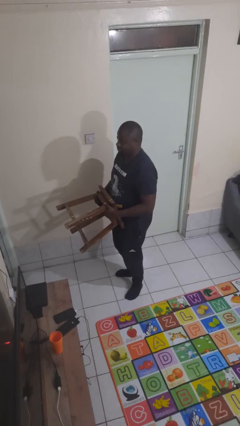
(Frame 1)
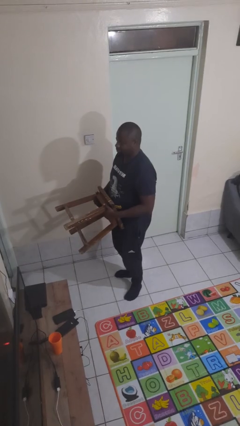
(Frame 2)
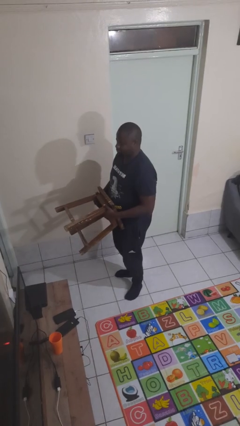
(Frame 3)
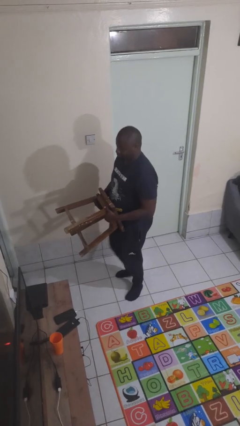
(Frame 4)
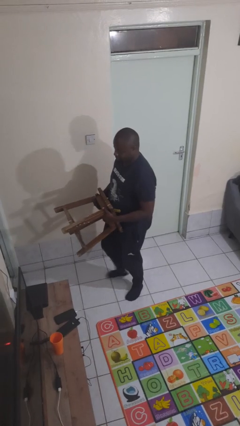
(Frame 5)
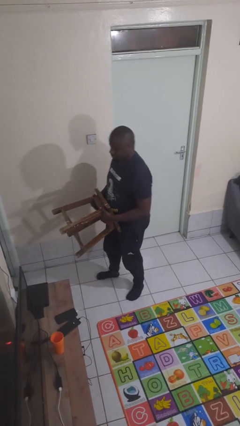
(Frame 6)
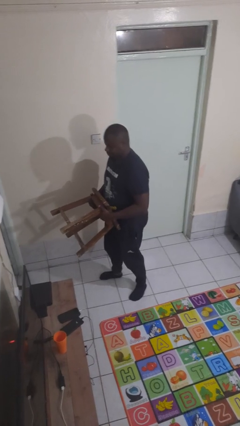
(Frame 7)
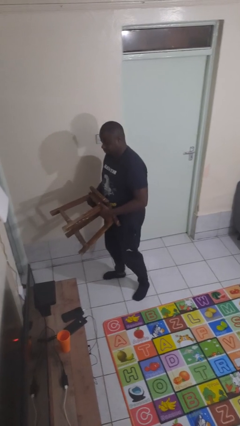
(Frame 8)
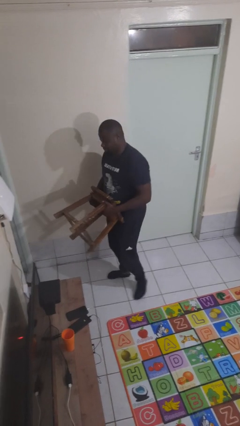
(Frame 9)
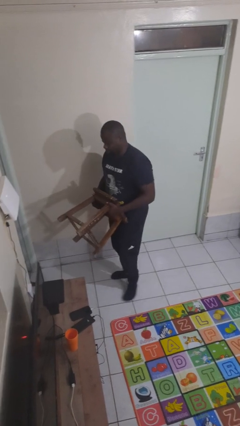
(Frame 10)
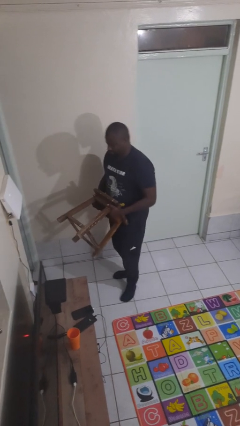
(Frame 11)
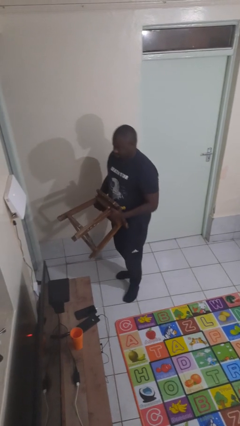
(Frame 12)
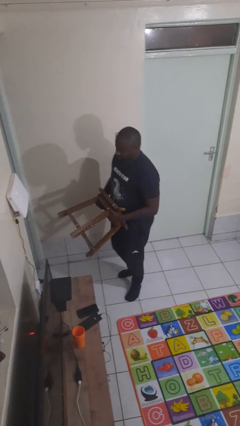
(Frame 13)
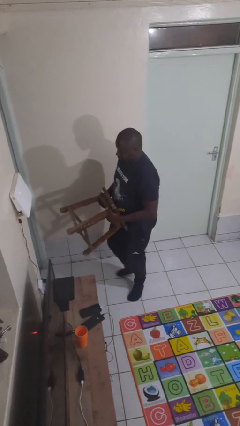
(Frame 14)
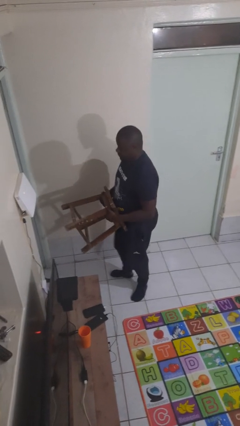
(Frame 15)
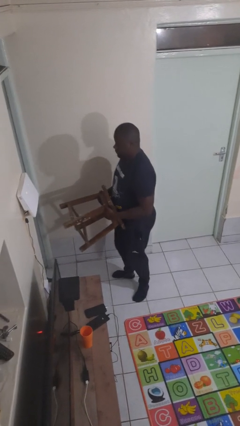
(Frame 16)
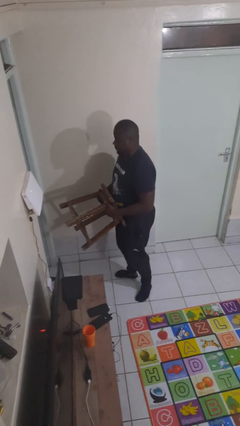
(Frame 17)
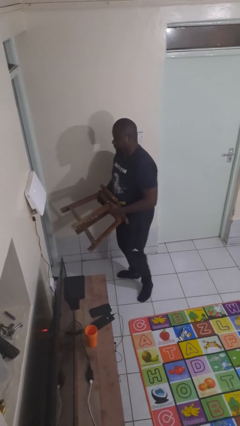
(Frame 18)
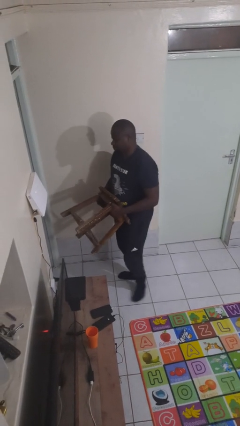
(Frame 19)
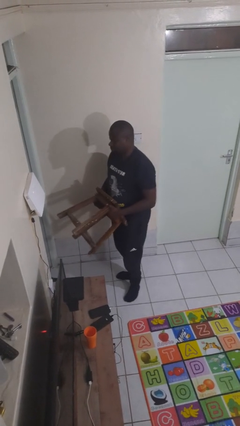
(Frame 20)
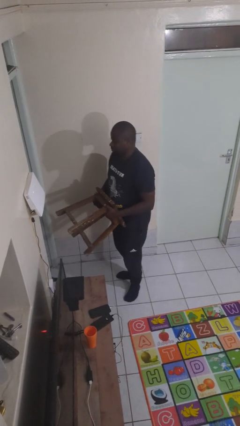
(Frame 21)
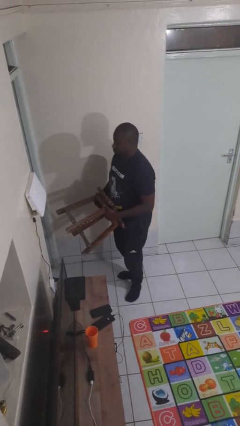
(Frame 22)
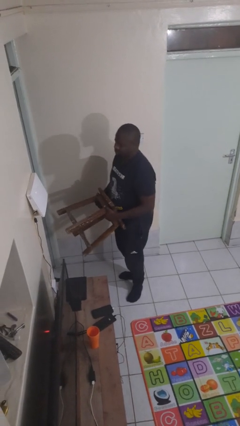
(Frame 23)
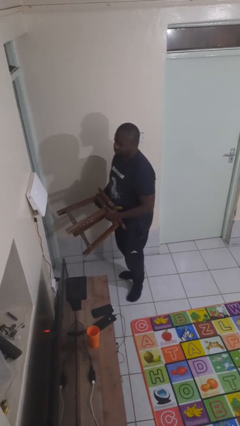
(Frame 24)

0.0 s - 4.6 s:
person carries furniture

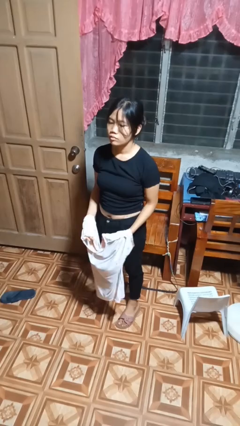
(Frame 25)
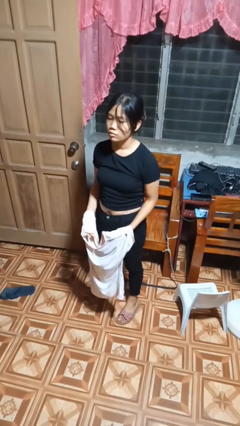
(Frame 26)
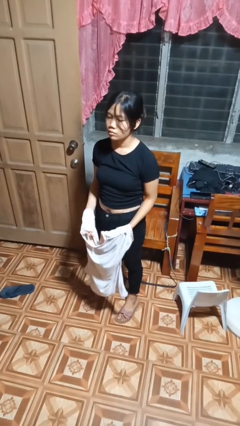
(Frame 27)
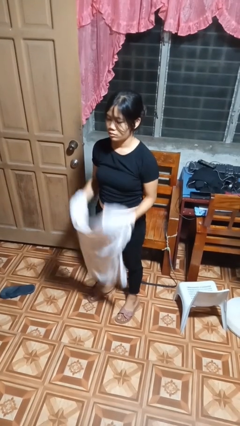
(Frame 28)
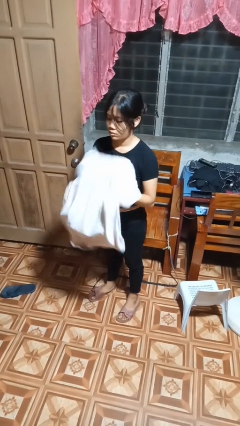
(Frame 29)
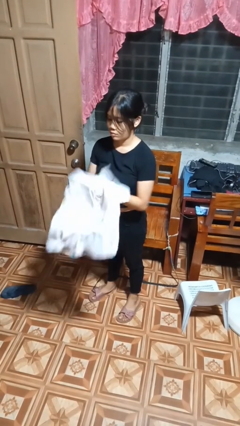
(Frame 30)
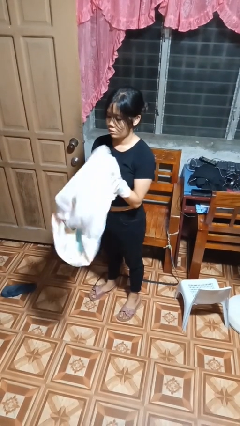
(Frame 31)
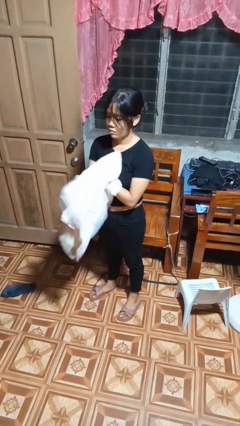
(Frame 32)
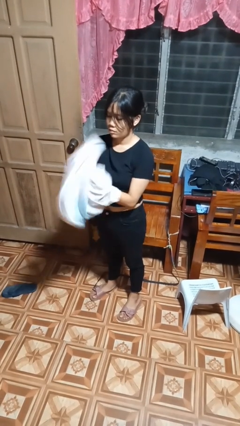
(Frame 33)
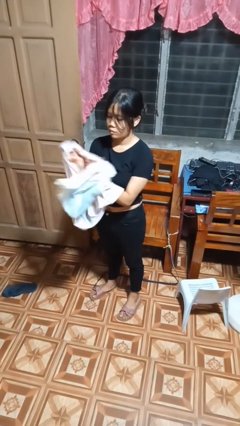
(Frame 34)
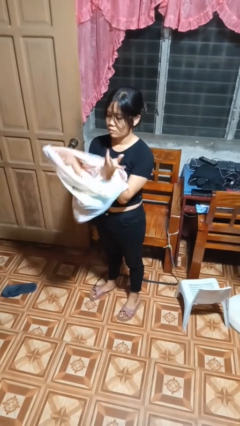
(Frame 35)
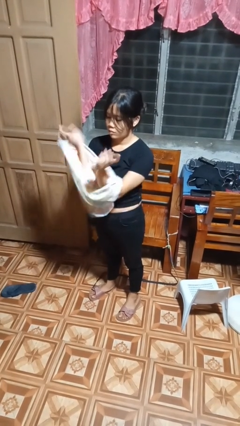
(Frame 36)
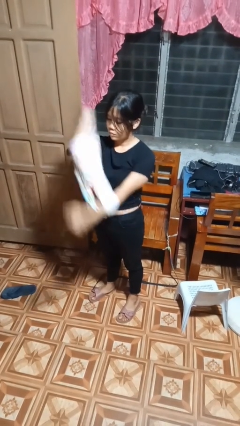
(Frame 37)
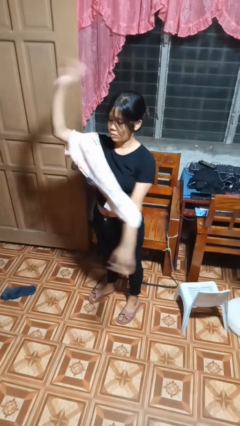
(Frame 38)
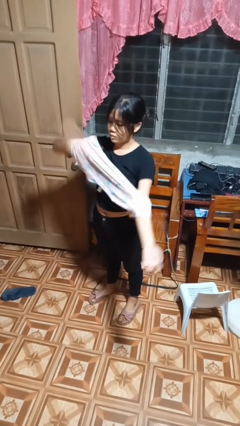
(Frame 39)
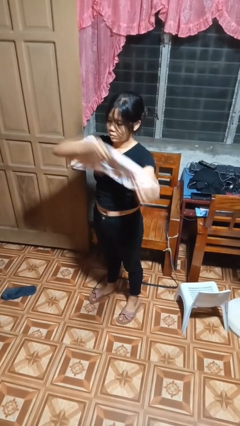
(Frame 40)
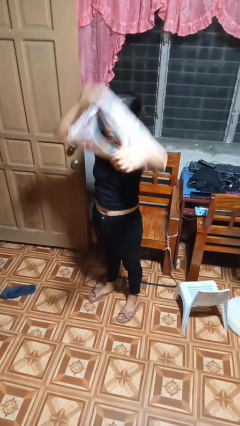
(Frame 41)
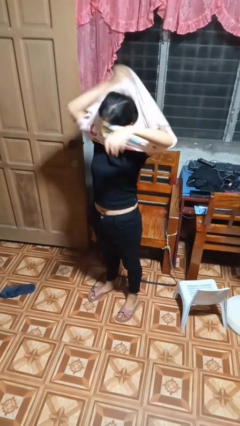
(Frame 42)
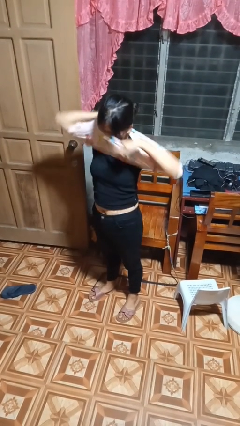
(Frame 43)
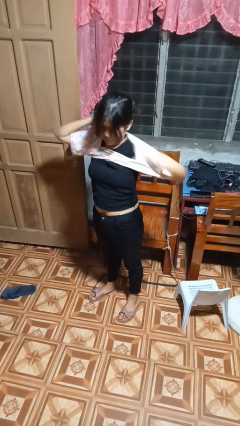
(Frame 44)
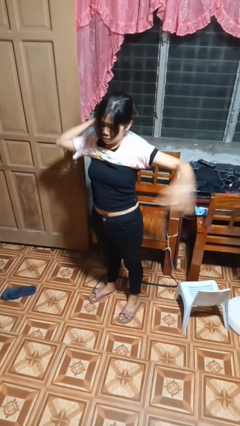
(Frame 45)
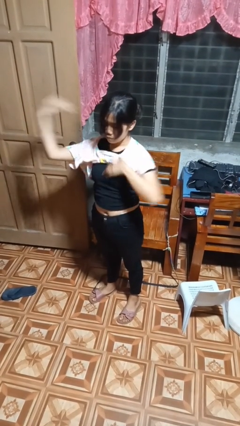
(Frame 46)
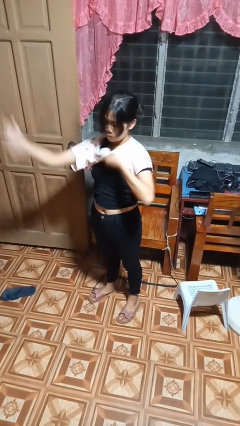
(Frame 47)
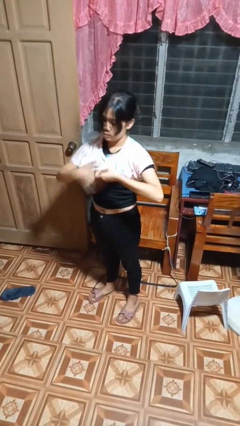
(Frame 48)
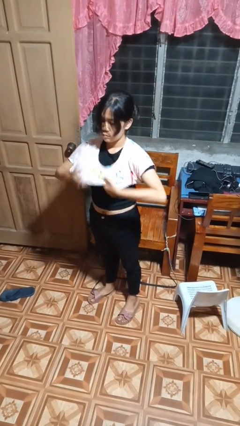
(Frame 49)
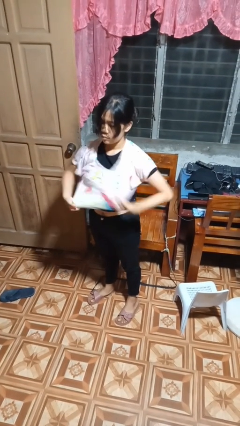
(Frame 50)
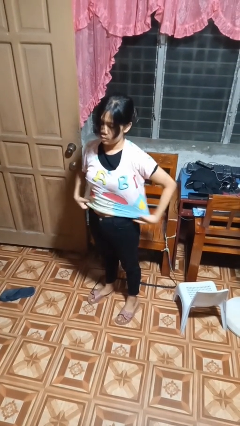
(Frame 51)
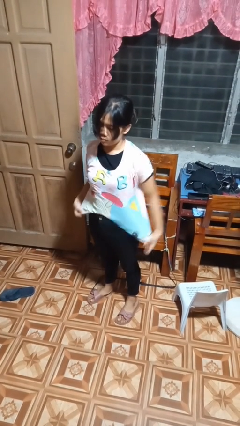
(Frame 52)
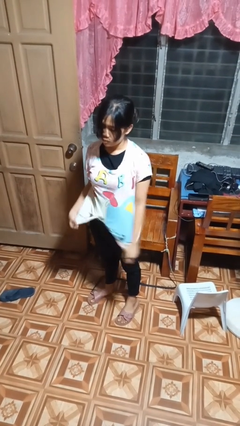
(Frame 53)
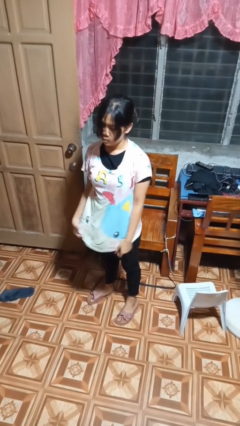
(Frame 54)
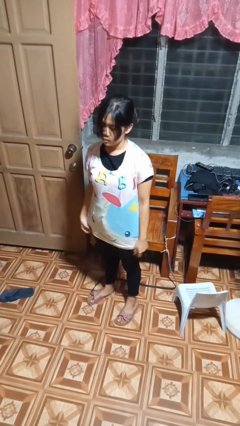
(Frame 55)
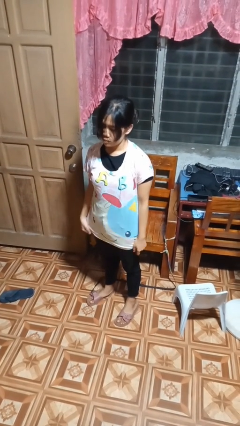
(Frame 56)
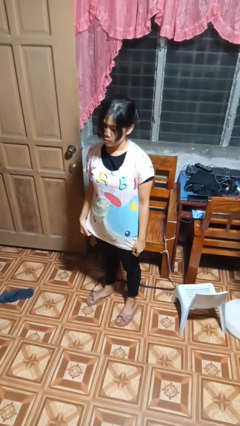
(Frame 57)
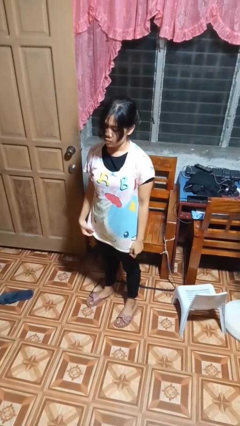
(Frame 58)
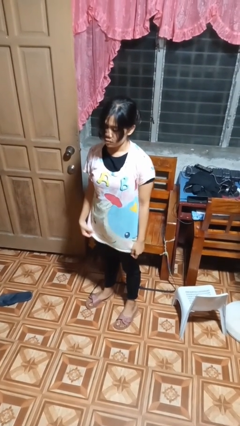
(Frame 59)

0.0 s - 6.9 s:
person puts on shirt

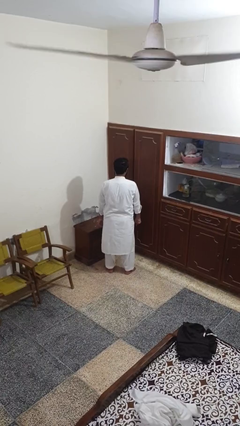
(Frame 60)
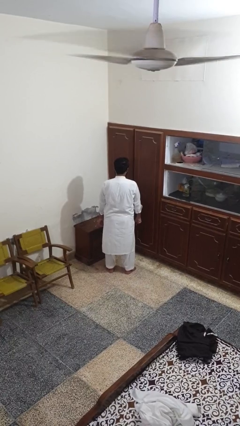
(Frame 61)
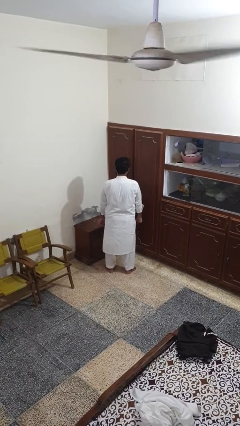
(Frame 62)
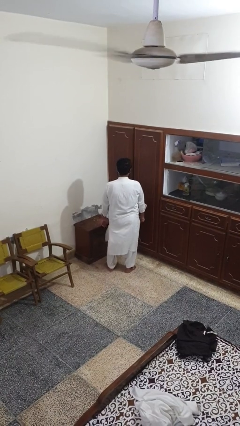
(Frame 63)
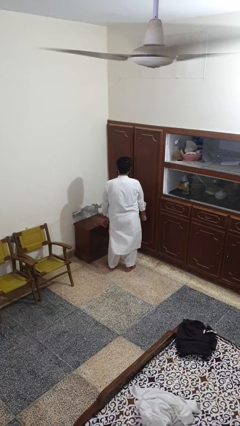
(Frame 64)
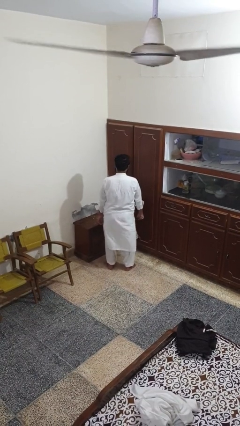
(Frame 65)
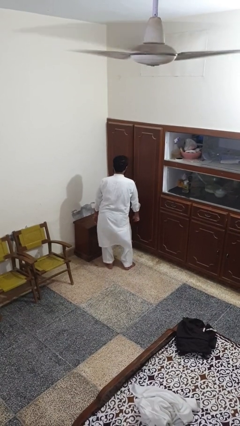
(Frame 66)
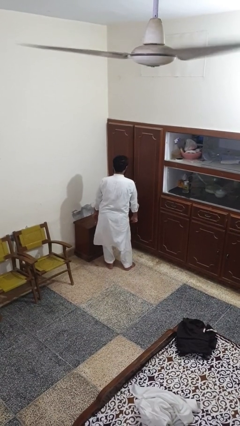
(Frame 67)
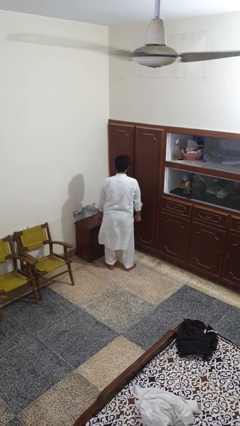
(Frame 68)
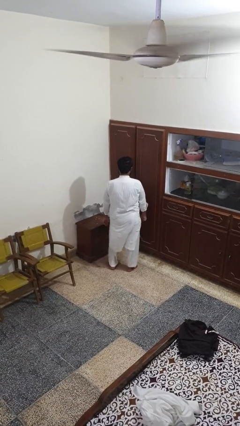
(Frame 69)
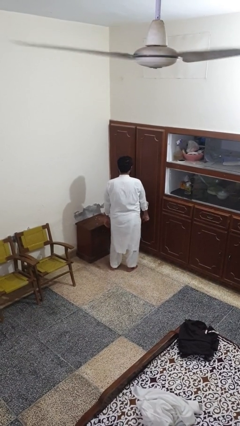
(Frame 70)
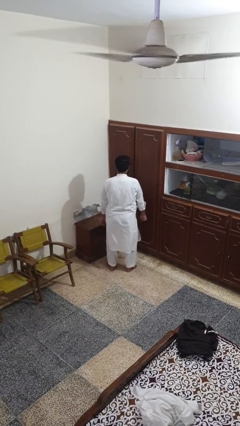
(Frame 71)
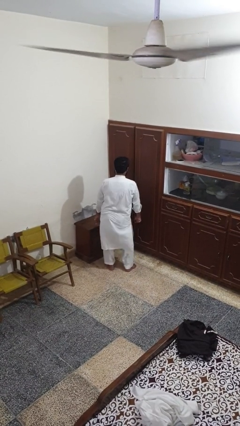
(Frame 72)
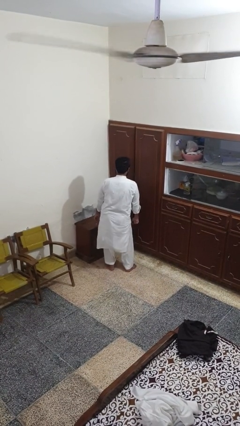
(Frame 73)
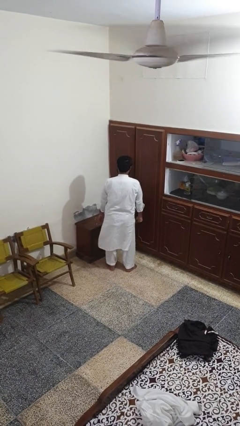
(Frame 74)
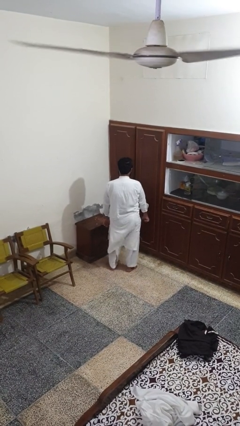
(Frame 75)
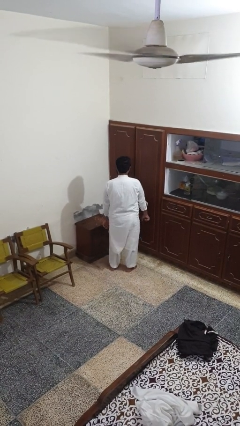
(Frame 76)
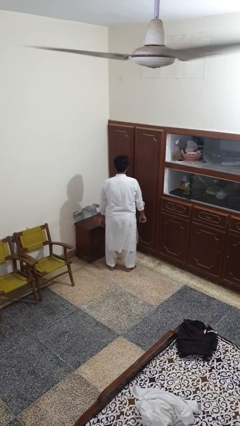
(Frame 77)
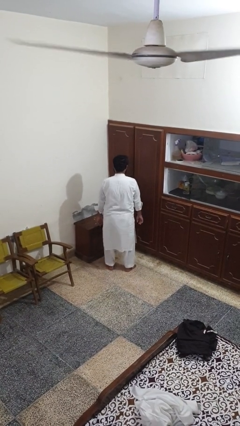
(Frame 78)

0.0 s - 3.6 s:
person wiggles hips

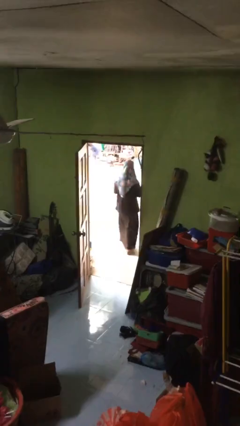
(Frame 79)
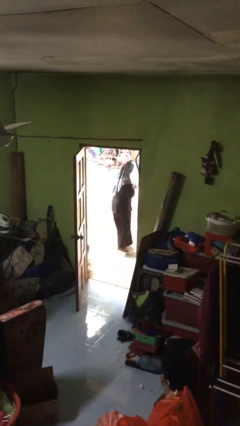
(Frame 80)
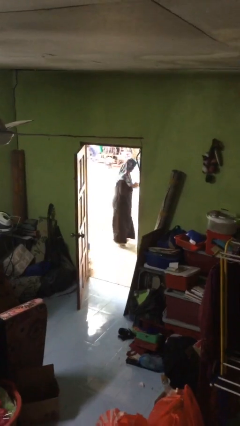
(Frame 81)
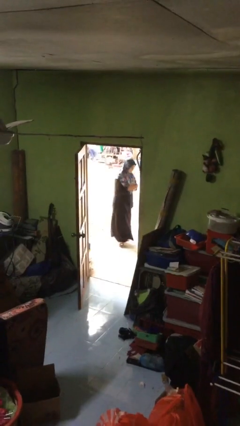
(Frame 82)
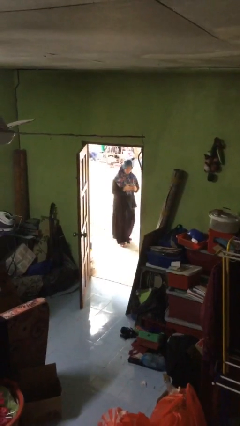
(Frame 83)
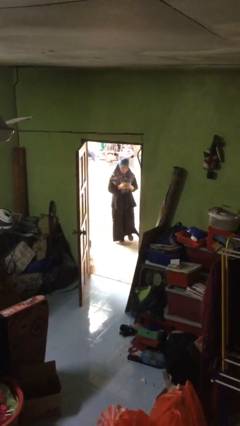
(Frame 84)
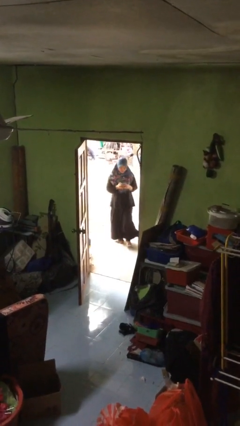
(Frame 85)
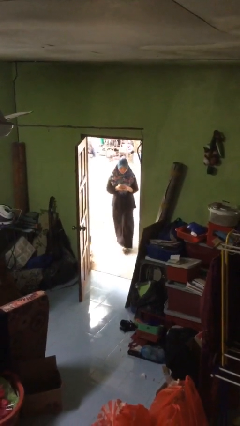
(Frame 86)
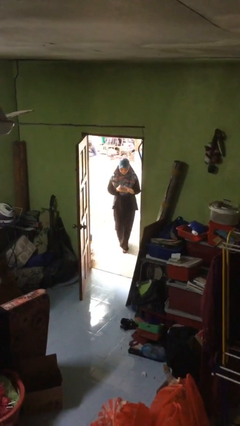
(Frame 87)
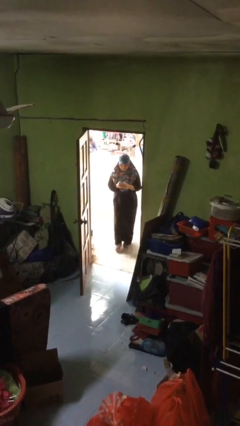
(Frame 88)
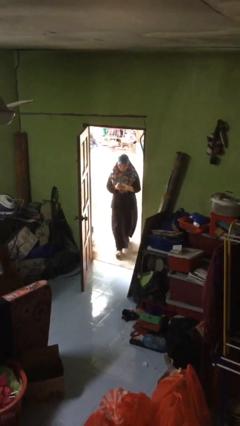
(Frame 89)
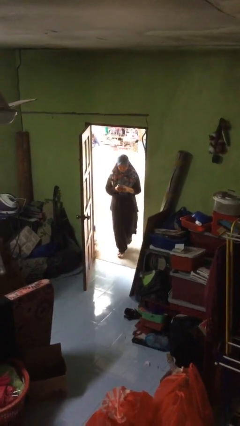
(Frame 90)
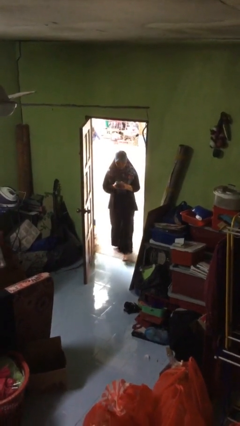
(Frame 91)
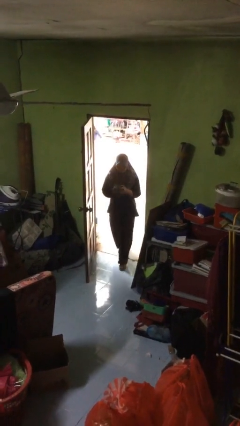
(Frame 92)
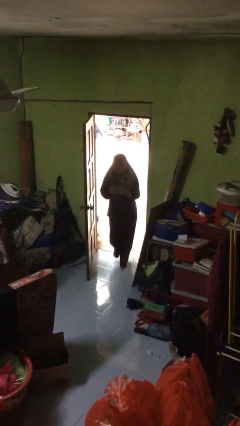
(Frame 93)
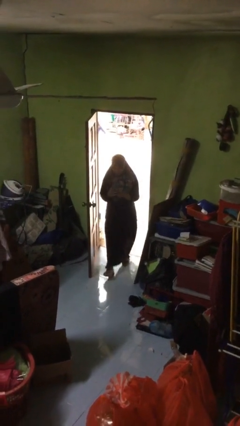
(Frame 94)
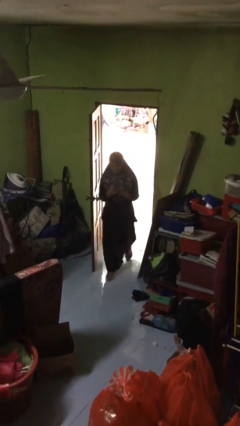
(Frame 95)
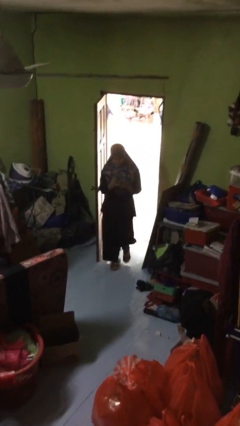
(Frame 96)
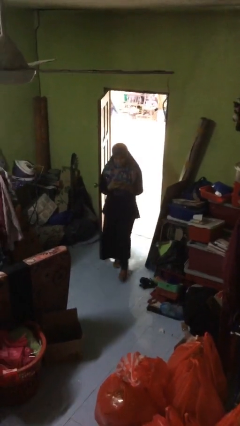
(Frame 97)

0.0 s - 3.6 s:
person enters scene through structure
